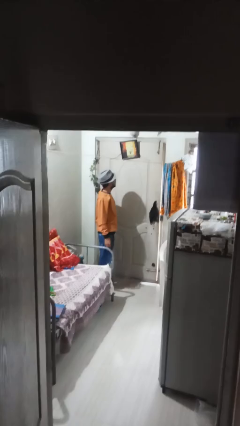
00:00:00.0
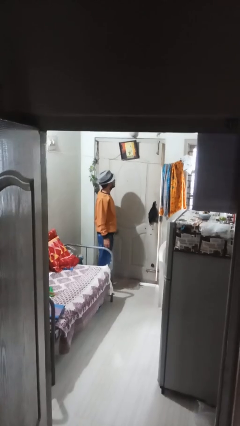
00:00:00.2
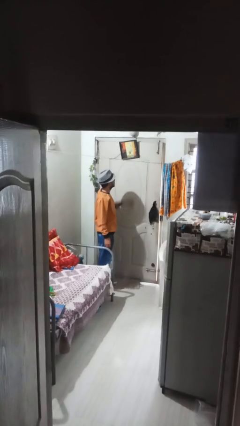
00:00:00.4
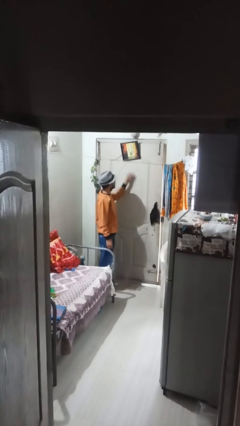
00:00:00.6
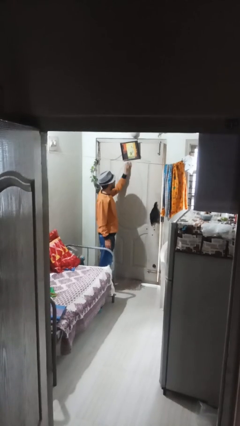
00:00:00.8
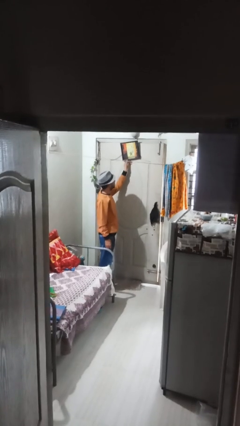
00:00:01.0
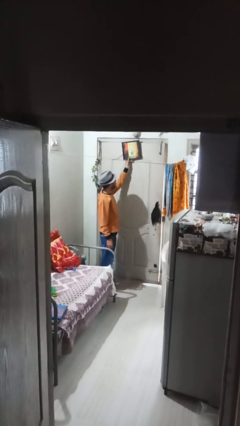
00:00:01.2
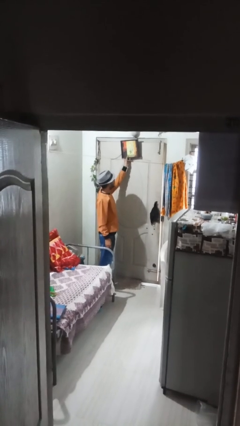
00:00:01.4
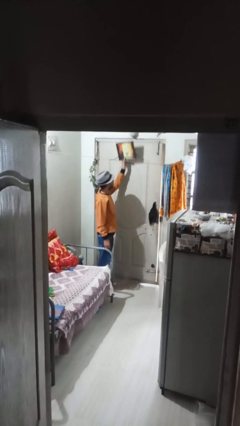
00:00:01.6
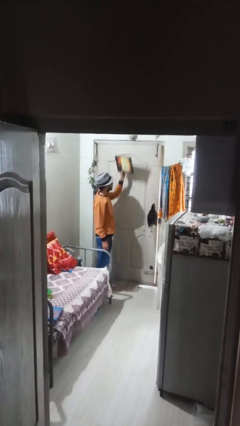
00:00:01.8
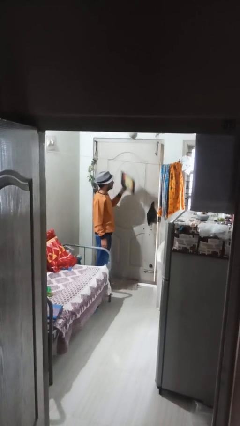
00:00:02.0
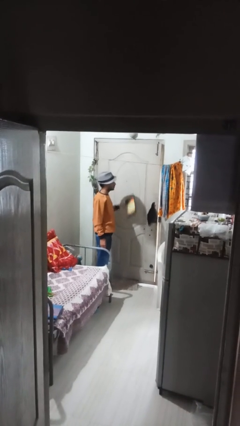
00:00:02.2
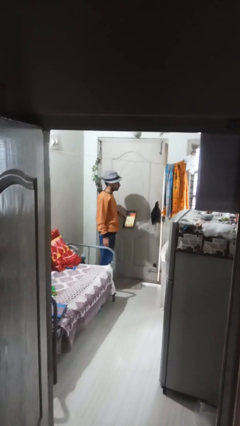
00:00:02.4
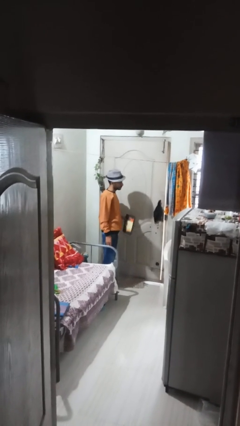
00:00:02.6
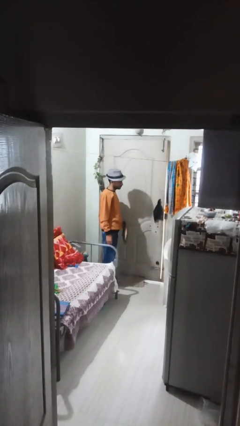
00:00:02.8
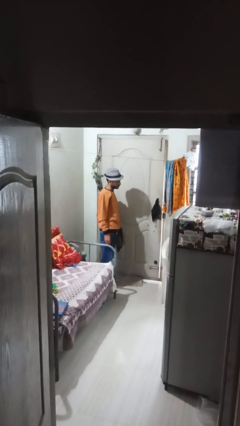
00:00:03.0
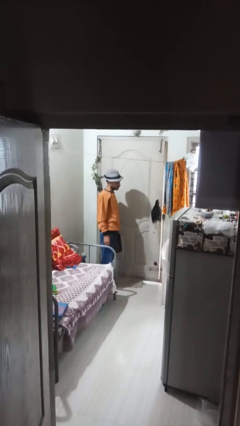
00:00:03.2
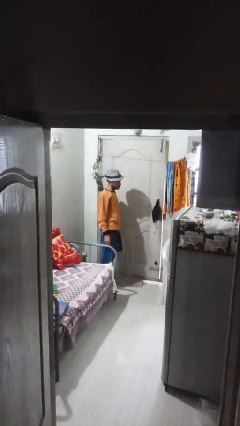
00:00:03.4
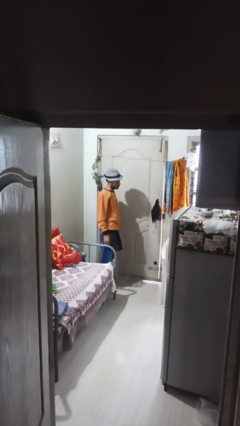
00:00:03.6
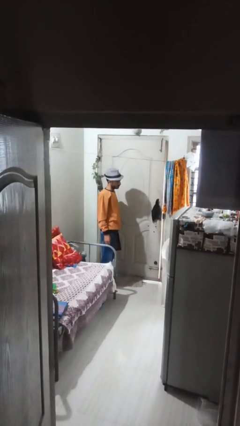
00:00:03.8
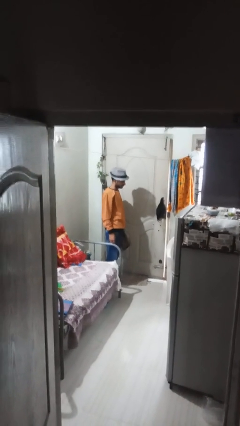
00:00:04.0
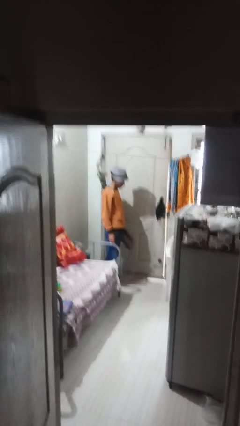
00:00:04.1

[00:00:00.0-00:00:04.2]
person takes down picture frame

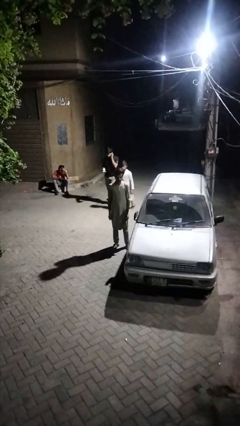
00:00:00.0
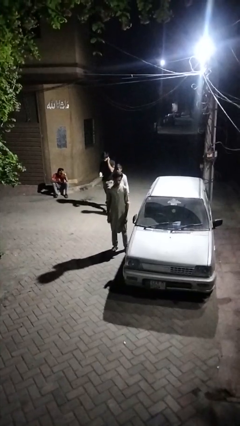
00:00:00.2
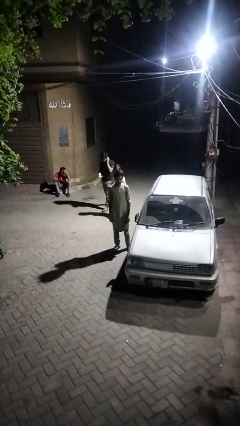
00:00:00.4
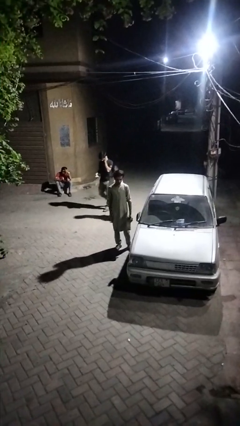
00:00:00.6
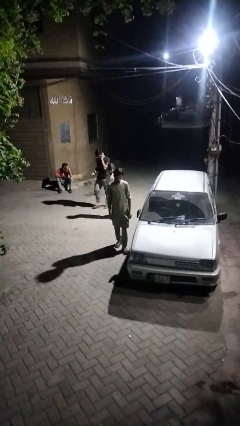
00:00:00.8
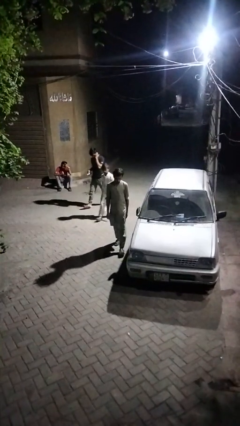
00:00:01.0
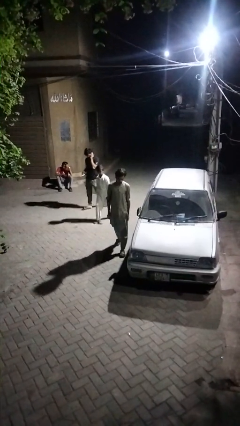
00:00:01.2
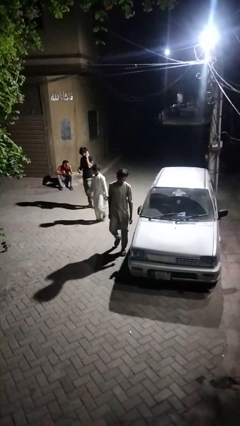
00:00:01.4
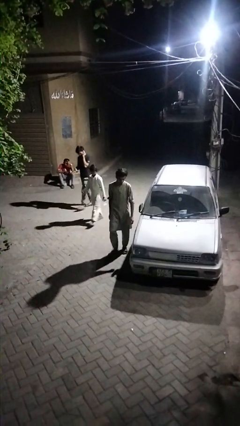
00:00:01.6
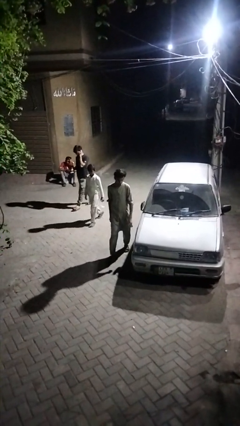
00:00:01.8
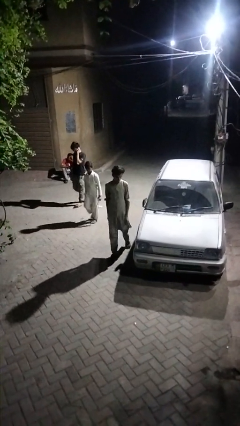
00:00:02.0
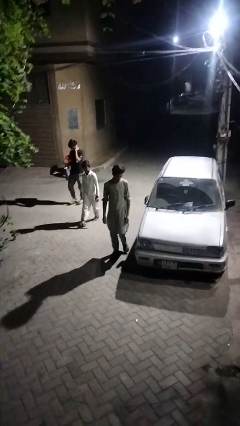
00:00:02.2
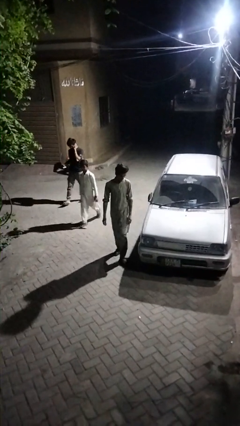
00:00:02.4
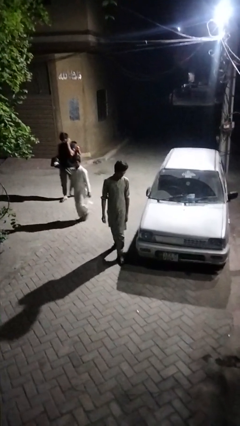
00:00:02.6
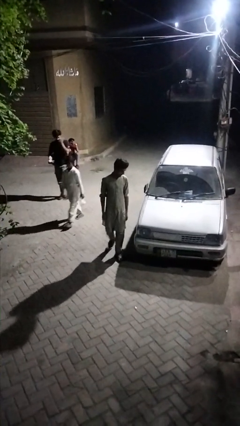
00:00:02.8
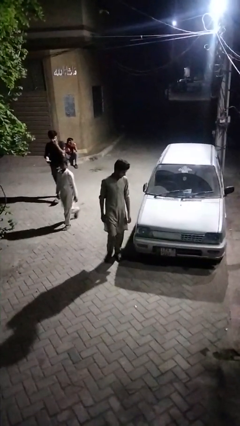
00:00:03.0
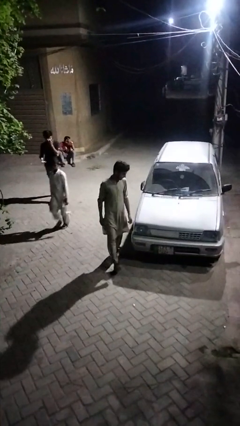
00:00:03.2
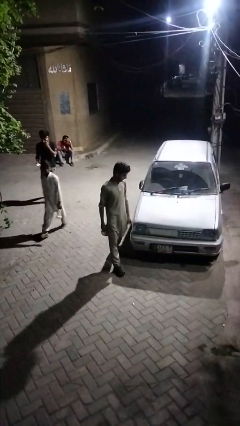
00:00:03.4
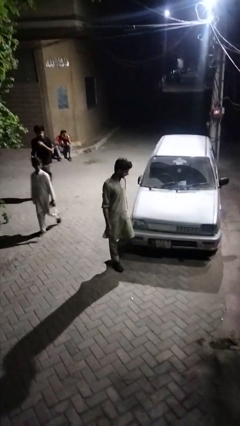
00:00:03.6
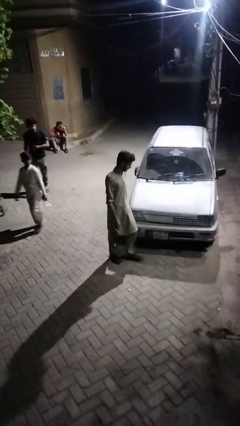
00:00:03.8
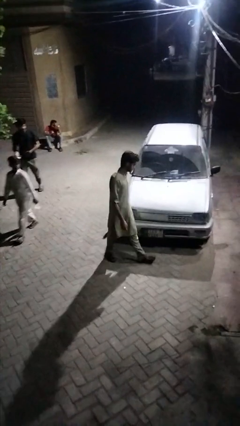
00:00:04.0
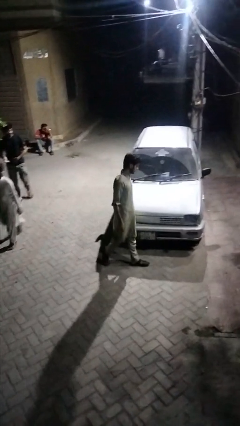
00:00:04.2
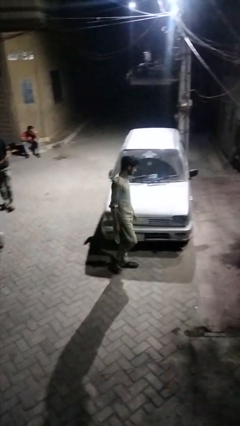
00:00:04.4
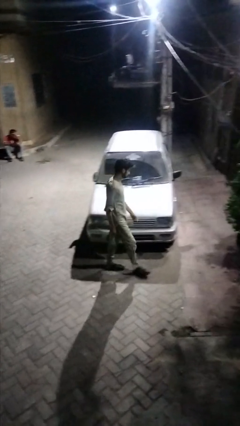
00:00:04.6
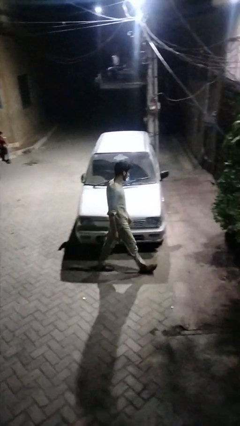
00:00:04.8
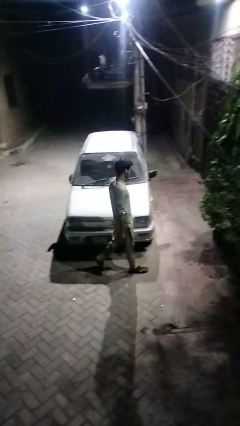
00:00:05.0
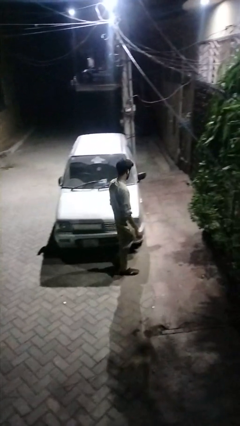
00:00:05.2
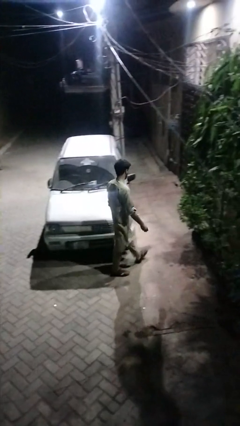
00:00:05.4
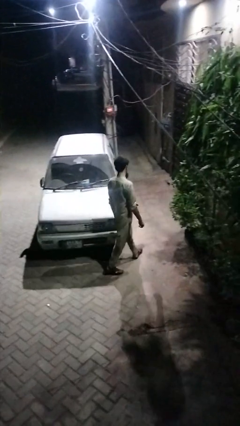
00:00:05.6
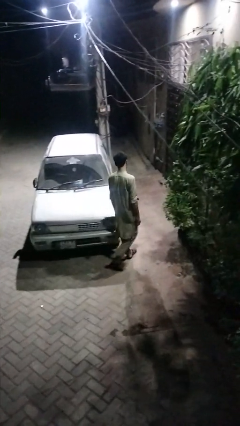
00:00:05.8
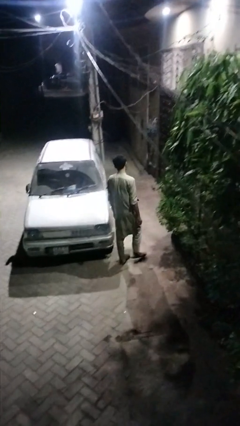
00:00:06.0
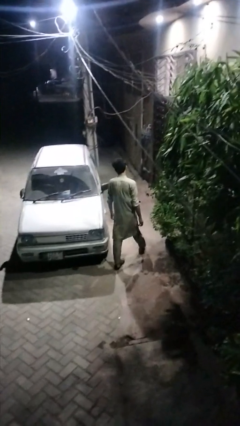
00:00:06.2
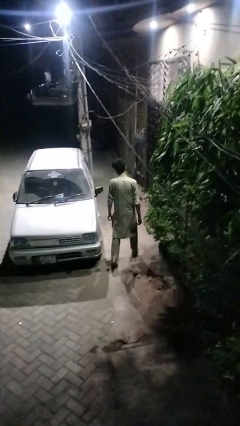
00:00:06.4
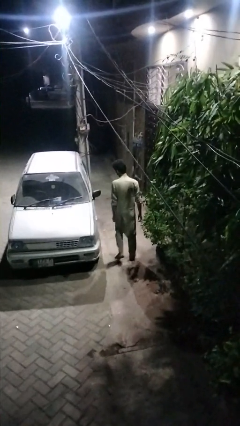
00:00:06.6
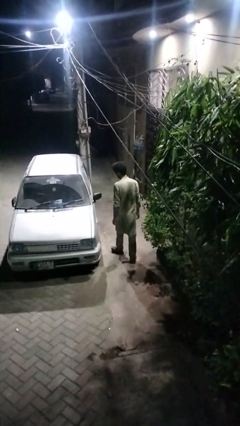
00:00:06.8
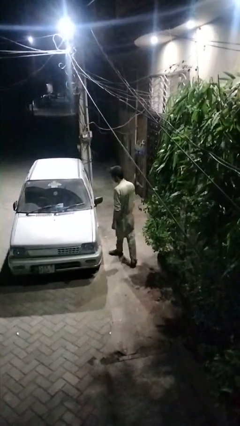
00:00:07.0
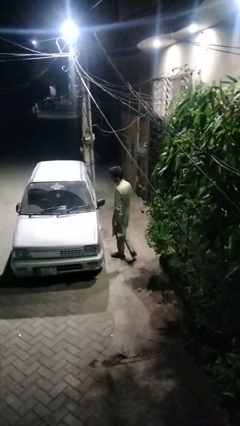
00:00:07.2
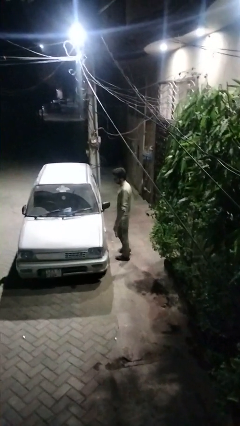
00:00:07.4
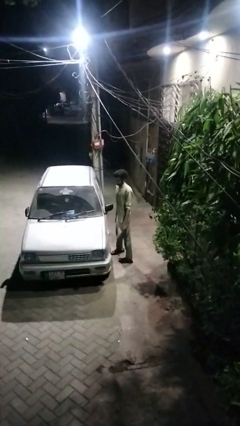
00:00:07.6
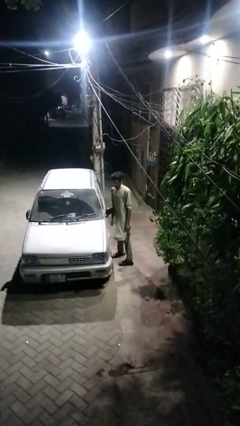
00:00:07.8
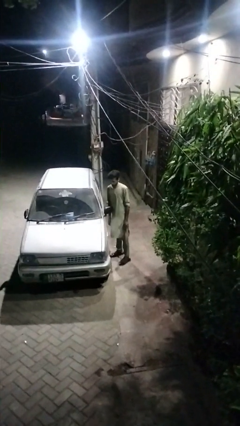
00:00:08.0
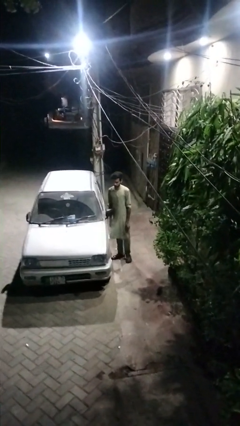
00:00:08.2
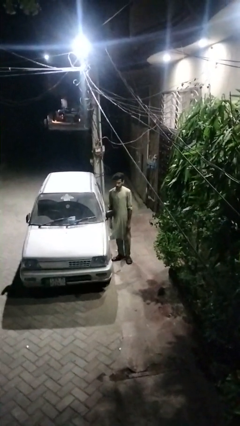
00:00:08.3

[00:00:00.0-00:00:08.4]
person walks around car

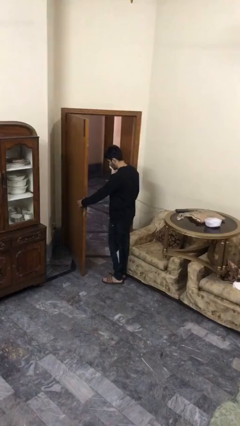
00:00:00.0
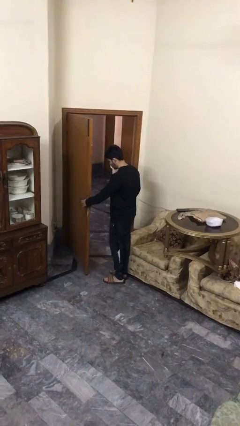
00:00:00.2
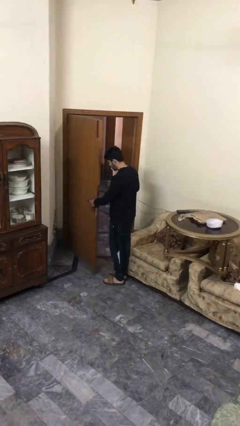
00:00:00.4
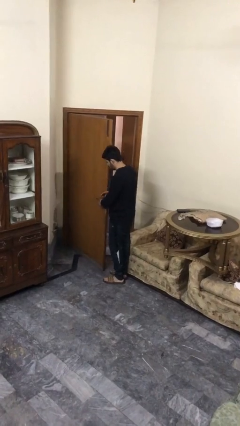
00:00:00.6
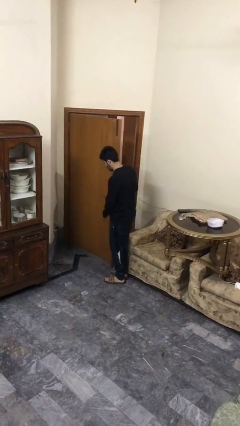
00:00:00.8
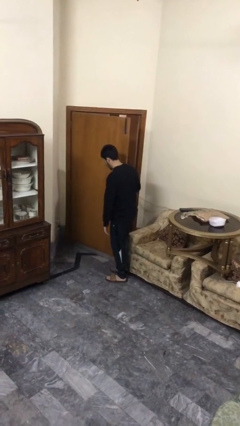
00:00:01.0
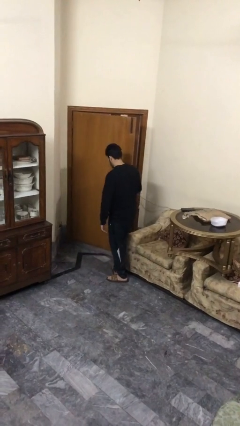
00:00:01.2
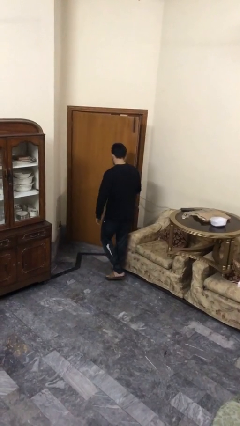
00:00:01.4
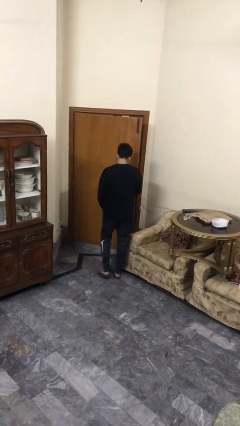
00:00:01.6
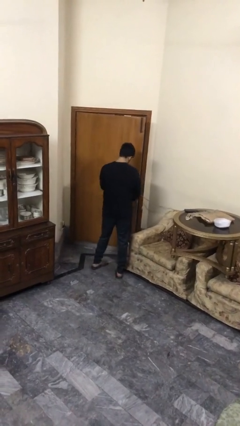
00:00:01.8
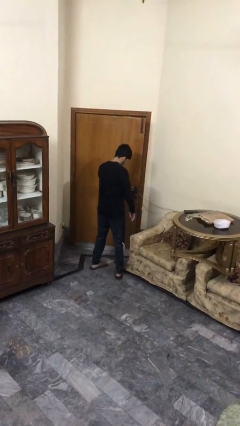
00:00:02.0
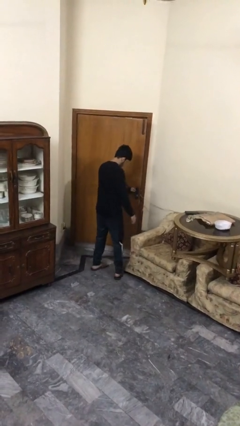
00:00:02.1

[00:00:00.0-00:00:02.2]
person closes facility door

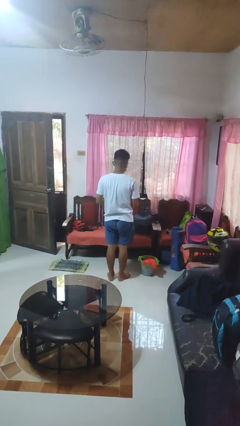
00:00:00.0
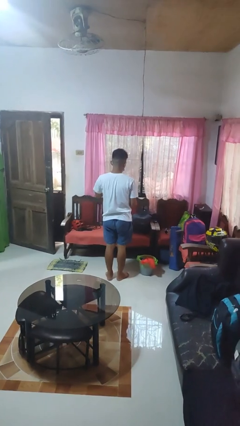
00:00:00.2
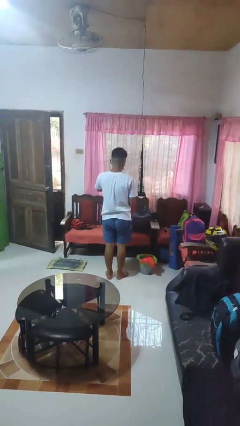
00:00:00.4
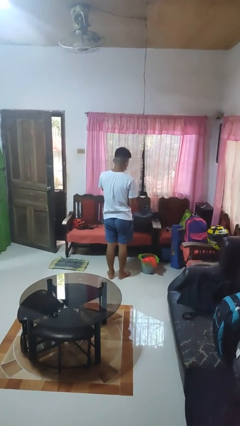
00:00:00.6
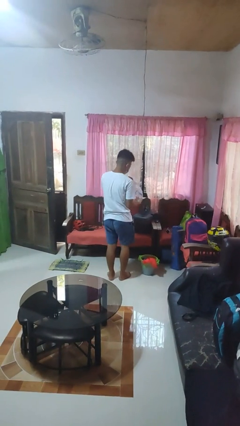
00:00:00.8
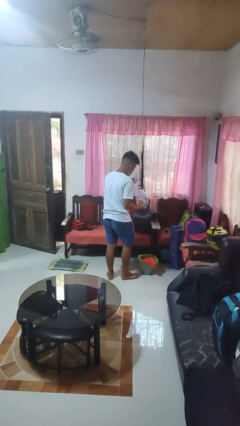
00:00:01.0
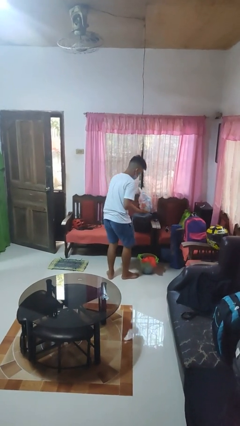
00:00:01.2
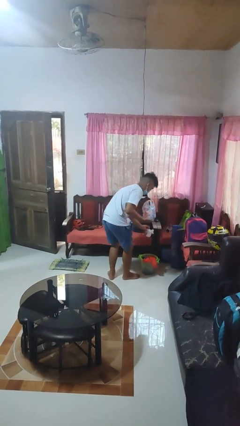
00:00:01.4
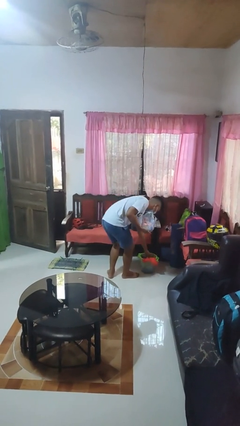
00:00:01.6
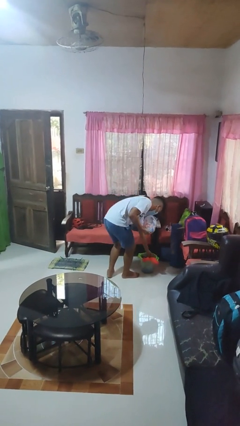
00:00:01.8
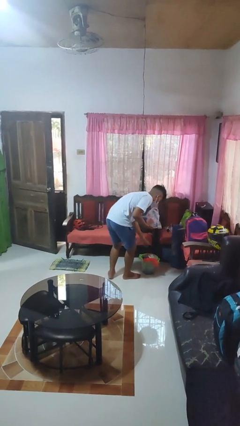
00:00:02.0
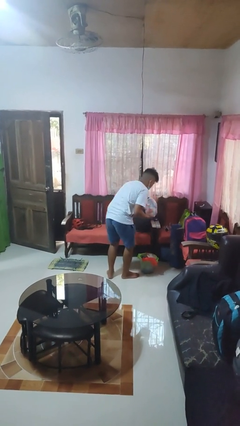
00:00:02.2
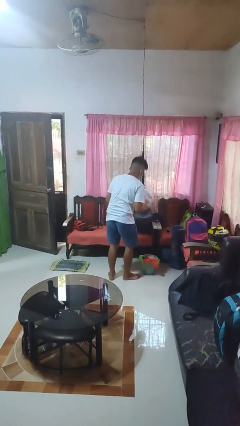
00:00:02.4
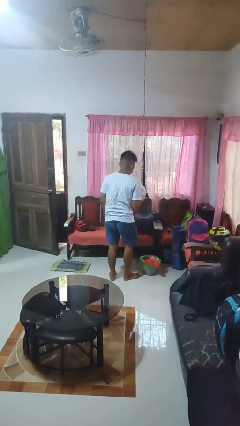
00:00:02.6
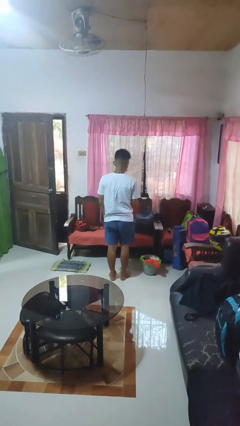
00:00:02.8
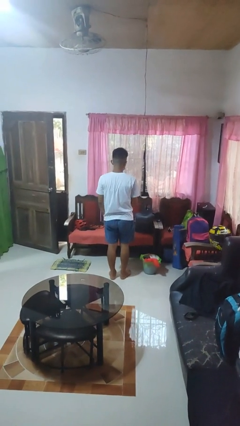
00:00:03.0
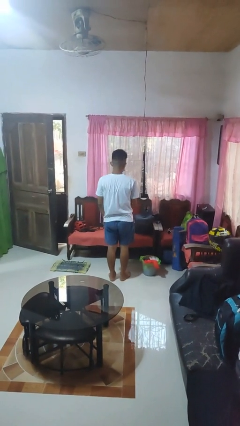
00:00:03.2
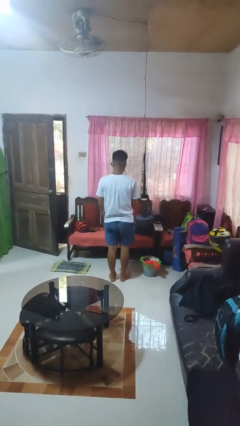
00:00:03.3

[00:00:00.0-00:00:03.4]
person discards trash
